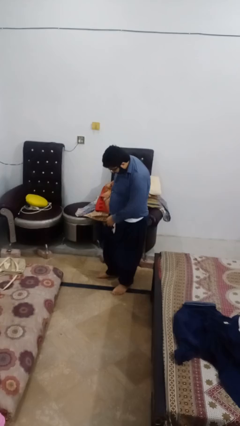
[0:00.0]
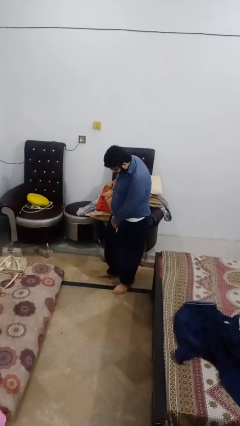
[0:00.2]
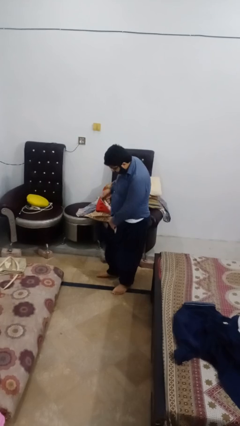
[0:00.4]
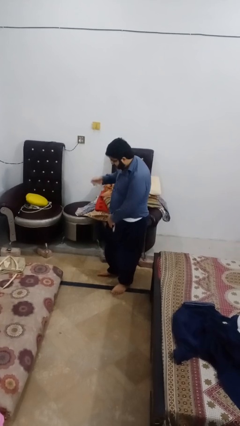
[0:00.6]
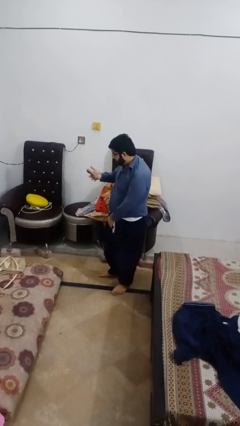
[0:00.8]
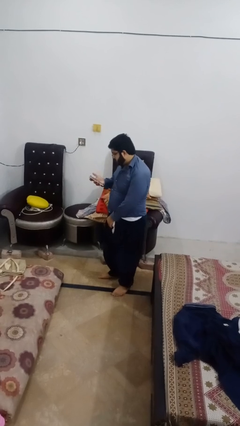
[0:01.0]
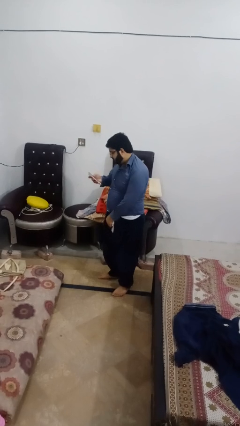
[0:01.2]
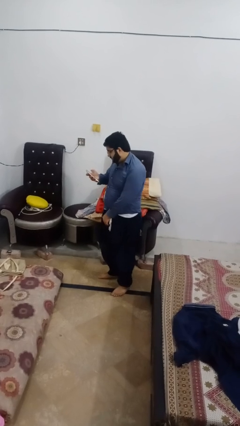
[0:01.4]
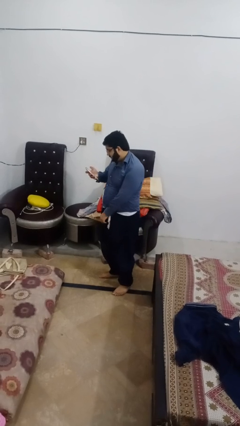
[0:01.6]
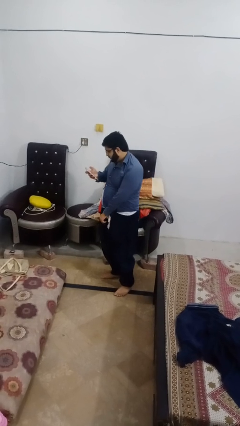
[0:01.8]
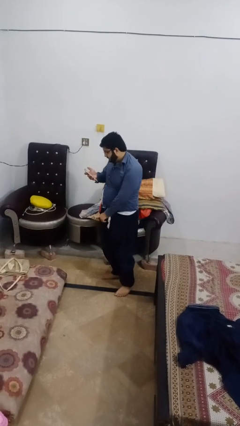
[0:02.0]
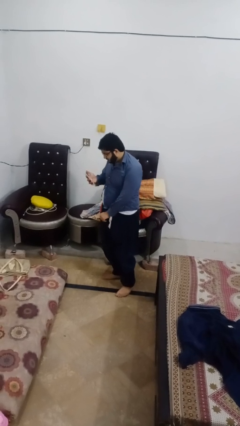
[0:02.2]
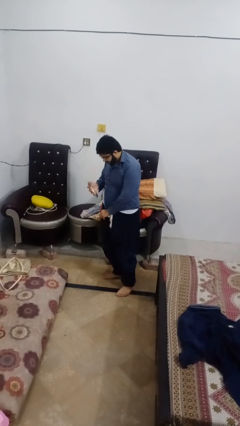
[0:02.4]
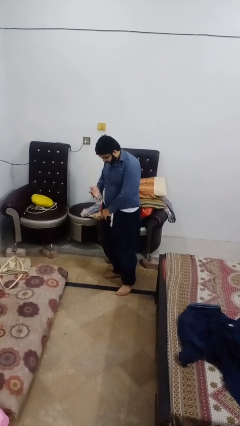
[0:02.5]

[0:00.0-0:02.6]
person takes phone from pocket

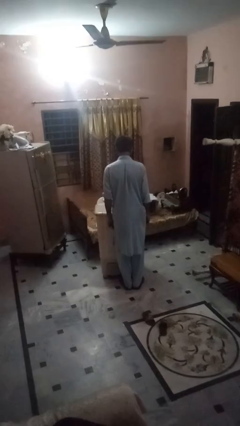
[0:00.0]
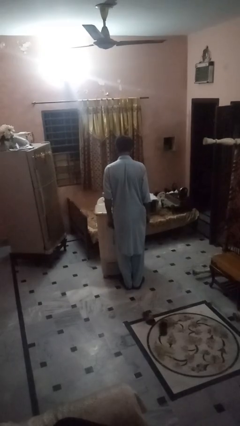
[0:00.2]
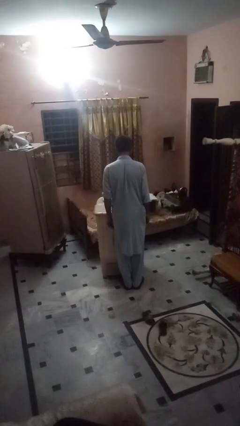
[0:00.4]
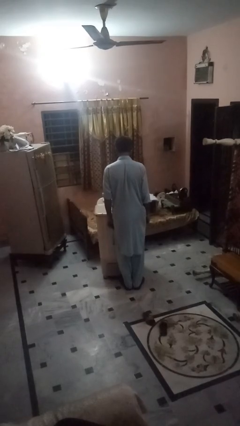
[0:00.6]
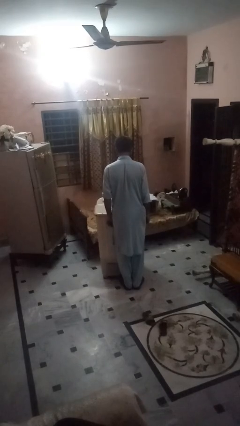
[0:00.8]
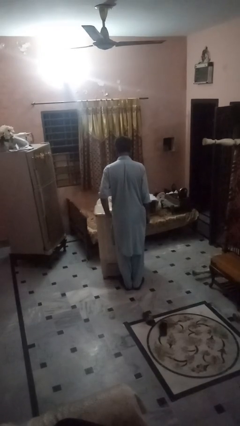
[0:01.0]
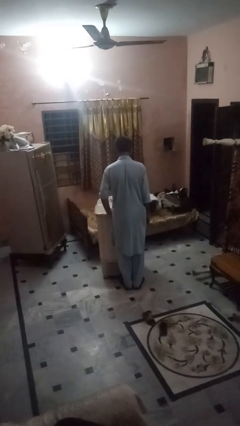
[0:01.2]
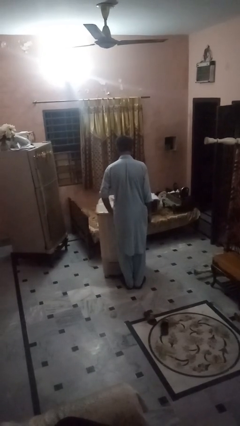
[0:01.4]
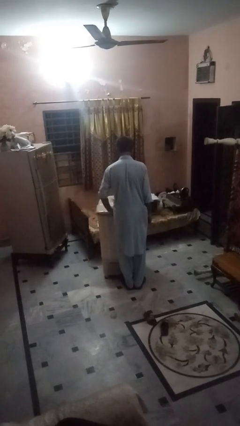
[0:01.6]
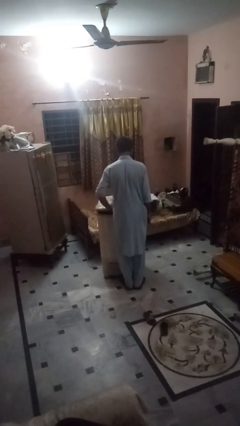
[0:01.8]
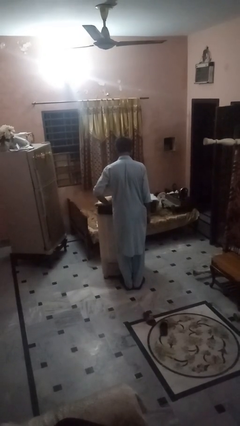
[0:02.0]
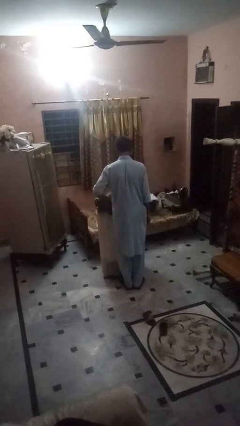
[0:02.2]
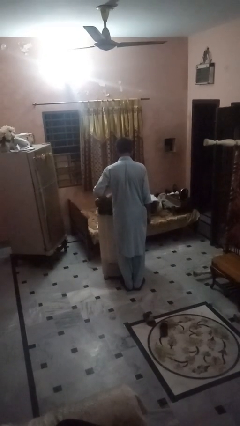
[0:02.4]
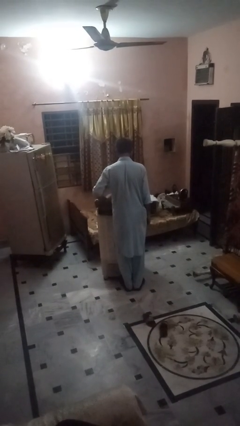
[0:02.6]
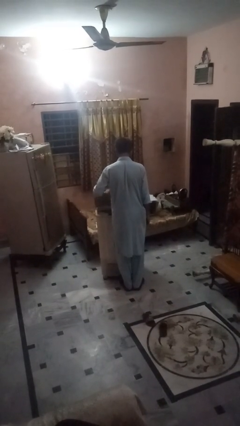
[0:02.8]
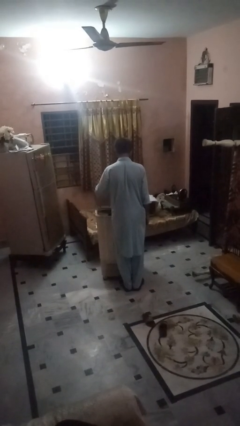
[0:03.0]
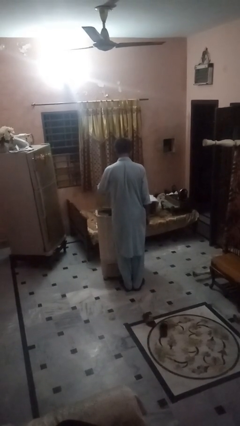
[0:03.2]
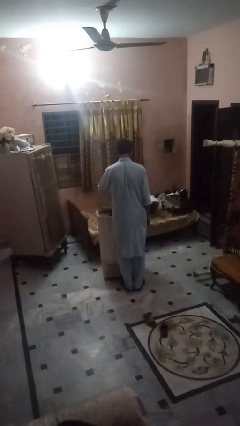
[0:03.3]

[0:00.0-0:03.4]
person opens clothes washer

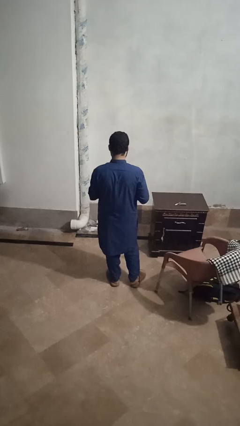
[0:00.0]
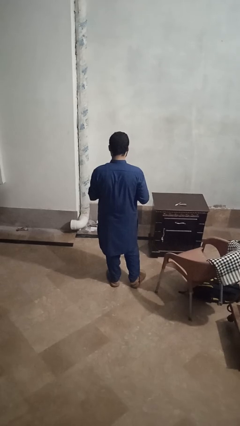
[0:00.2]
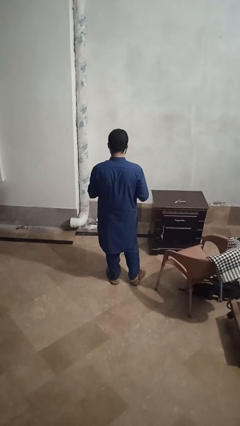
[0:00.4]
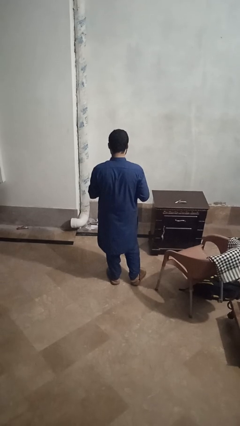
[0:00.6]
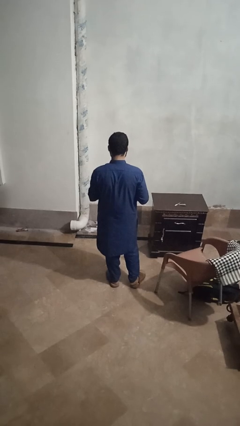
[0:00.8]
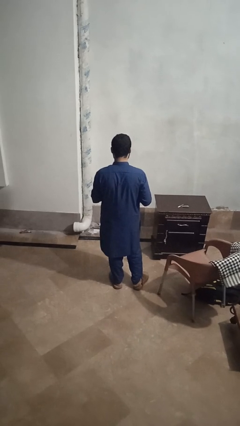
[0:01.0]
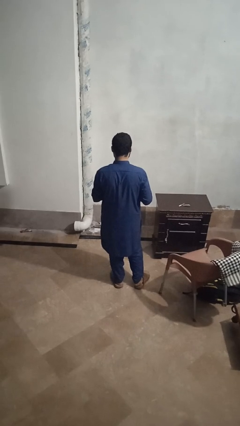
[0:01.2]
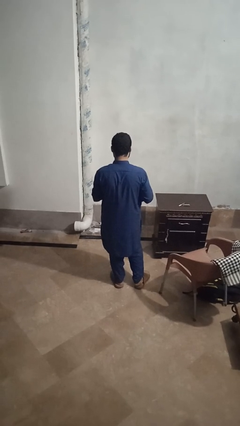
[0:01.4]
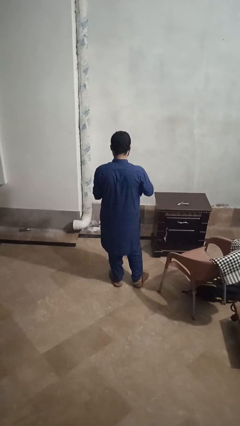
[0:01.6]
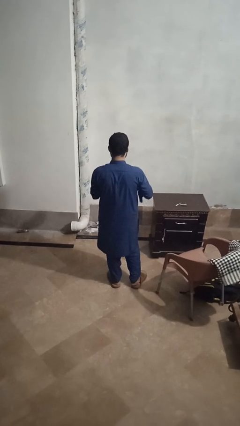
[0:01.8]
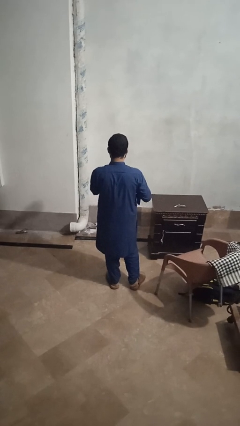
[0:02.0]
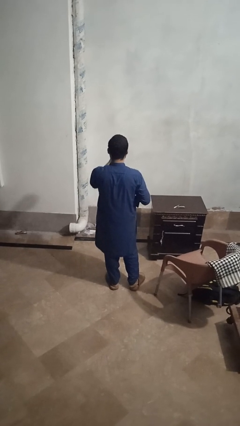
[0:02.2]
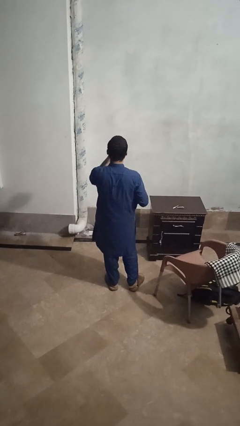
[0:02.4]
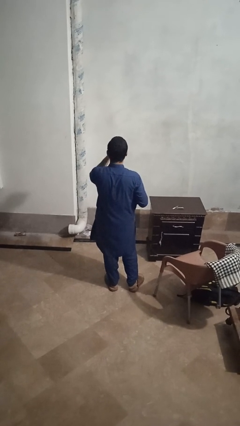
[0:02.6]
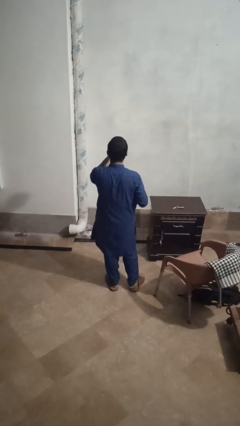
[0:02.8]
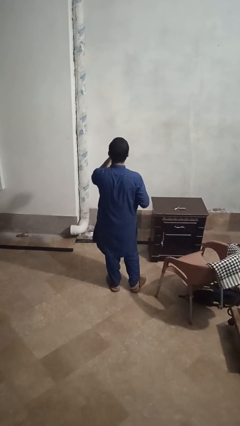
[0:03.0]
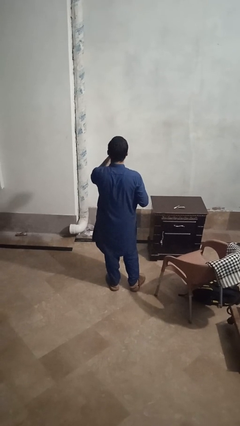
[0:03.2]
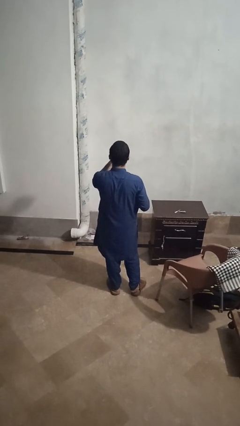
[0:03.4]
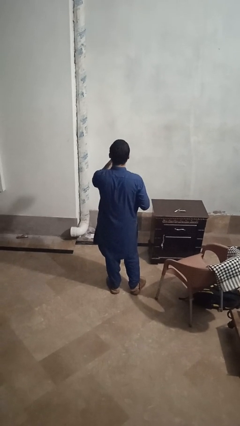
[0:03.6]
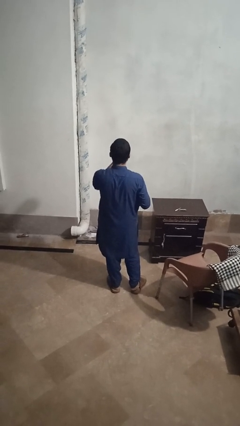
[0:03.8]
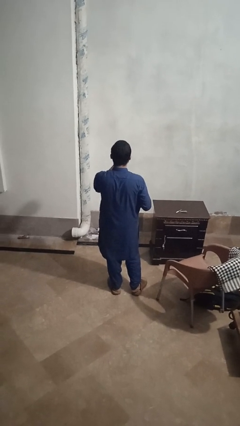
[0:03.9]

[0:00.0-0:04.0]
person opens beverage can

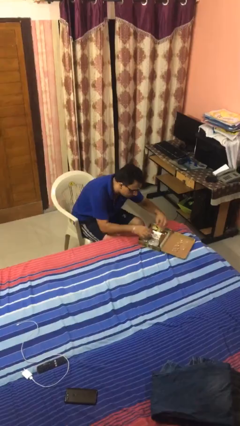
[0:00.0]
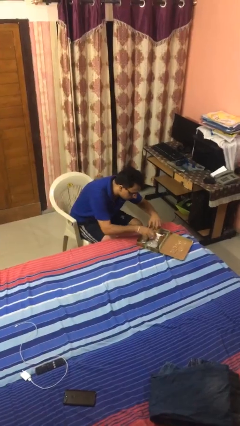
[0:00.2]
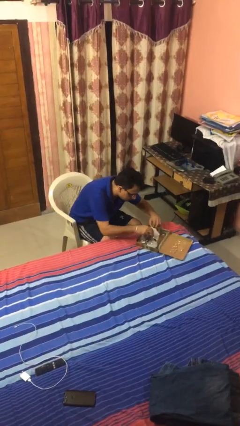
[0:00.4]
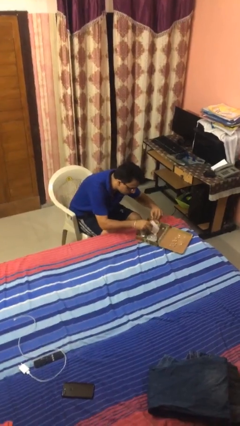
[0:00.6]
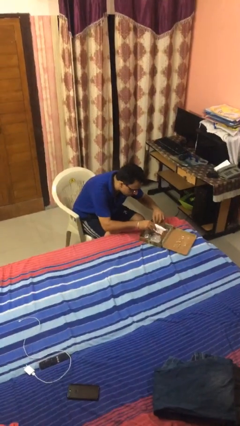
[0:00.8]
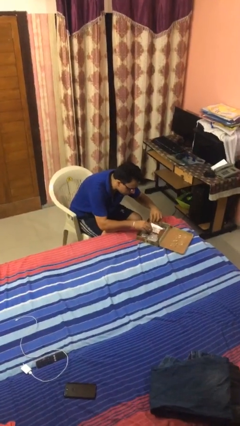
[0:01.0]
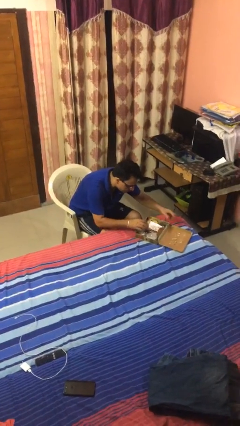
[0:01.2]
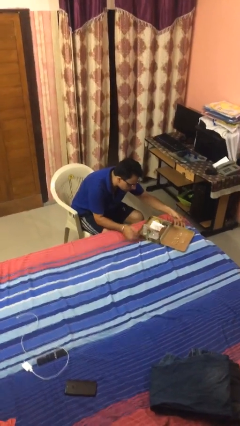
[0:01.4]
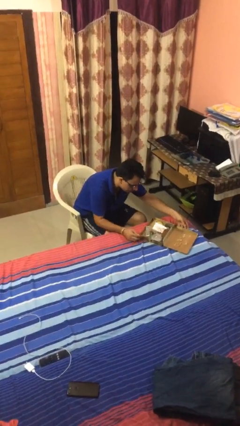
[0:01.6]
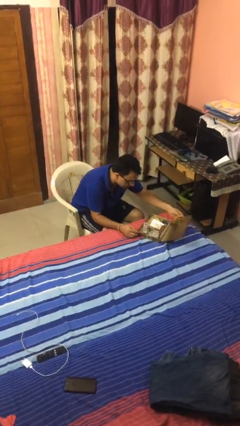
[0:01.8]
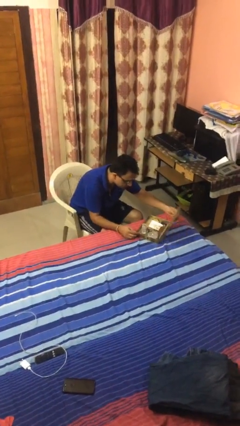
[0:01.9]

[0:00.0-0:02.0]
person searches jewelry box

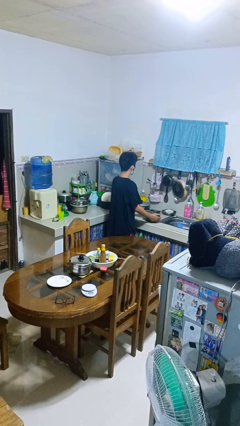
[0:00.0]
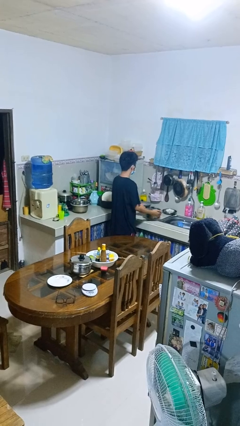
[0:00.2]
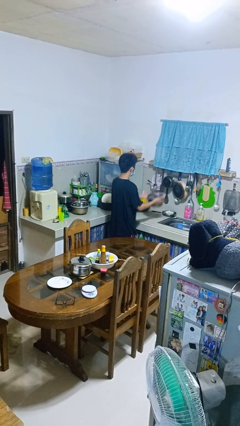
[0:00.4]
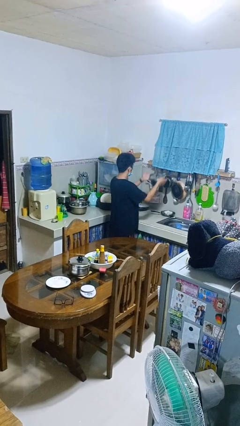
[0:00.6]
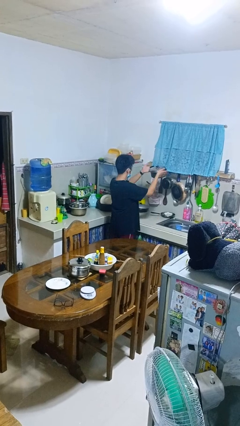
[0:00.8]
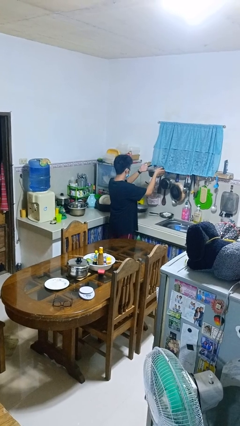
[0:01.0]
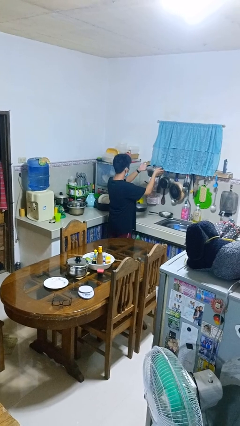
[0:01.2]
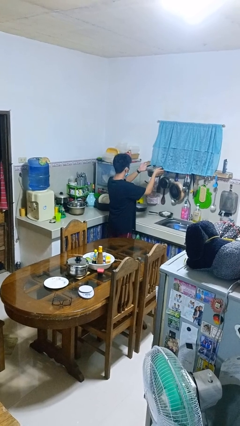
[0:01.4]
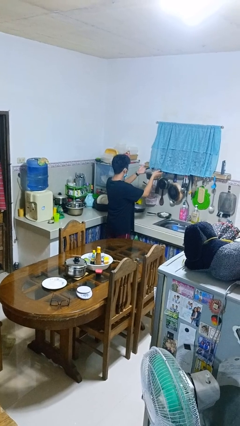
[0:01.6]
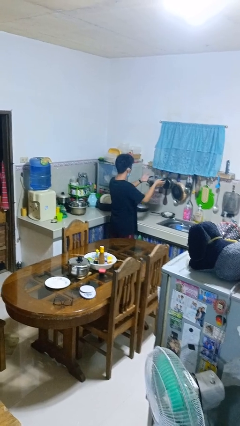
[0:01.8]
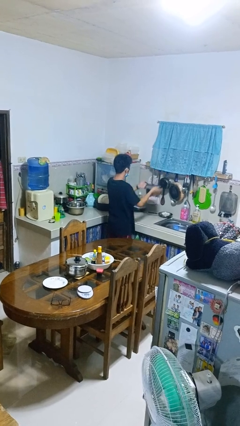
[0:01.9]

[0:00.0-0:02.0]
person picks up object from countertop

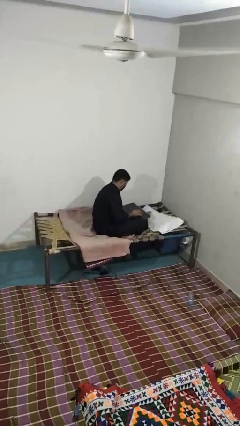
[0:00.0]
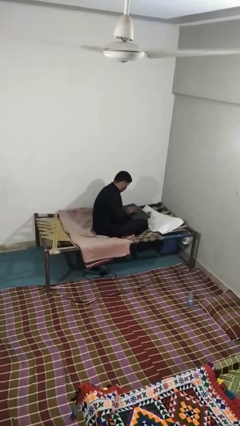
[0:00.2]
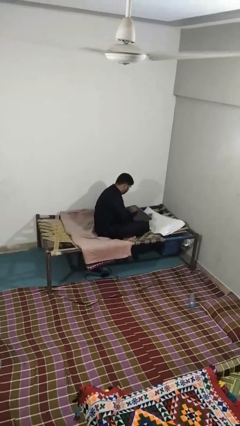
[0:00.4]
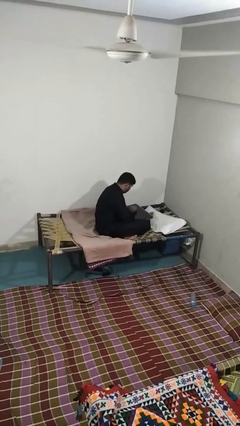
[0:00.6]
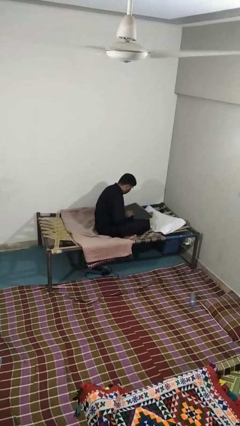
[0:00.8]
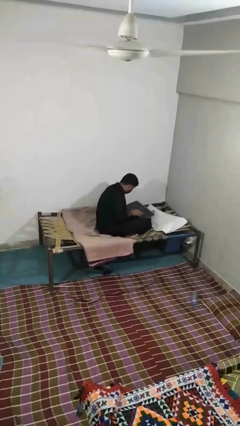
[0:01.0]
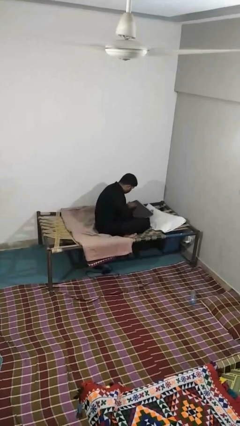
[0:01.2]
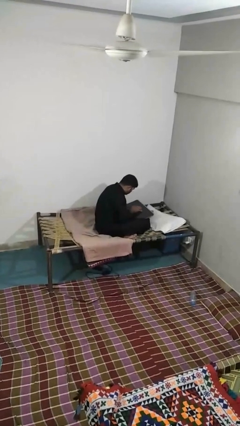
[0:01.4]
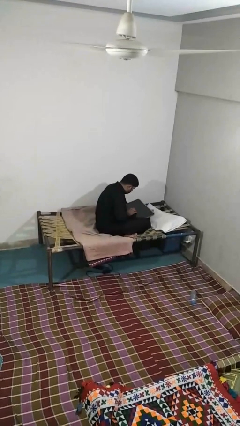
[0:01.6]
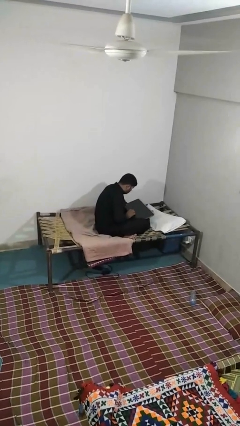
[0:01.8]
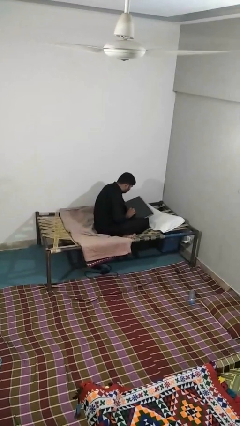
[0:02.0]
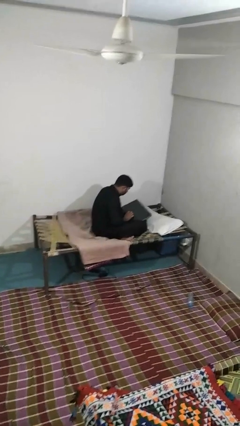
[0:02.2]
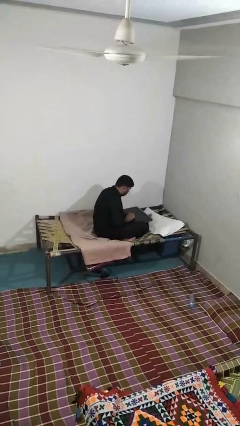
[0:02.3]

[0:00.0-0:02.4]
person interacts with tablet

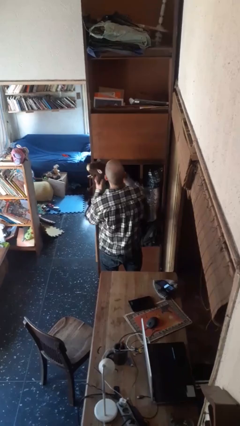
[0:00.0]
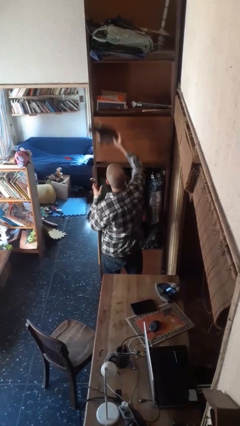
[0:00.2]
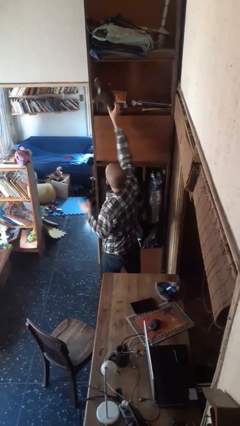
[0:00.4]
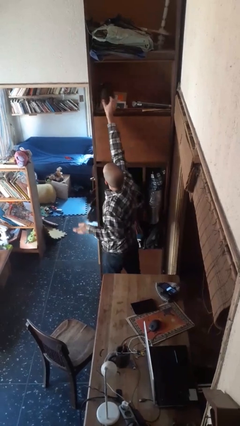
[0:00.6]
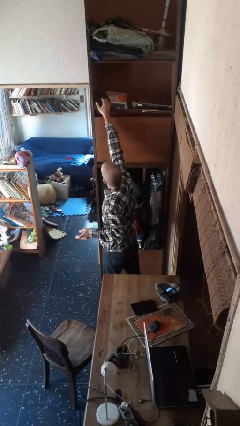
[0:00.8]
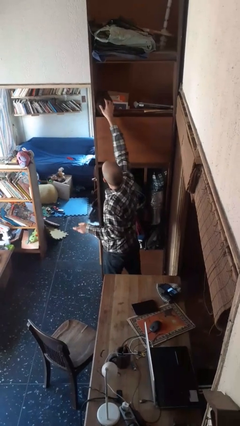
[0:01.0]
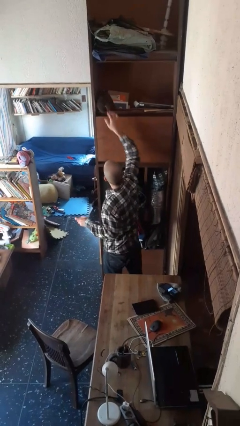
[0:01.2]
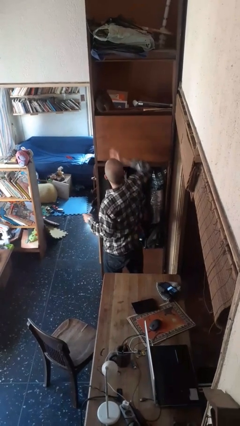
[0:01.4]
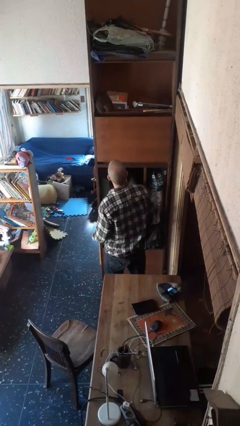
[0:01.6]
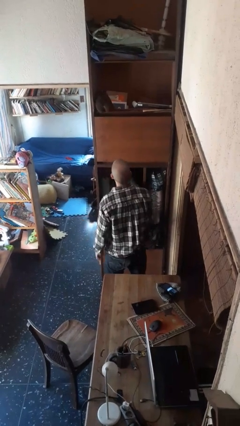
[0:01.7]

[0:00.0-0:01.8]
person puts down object on shelf
